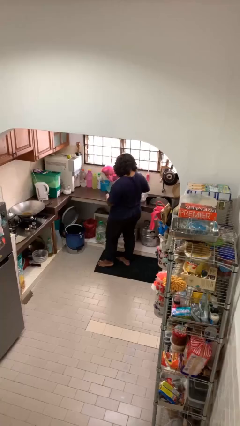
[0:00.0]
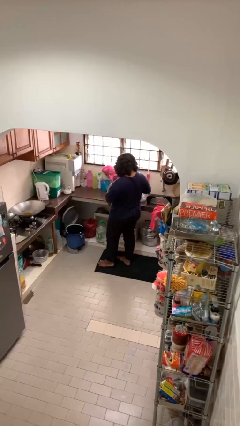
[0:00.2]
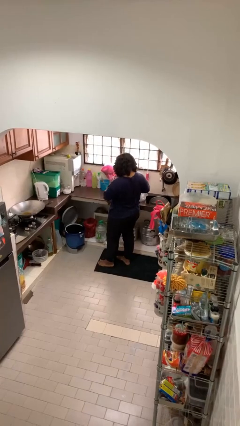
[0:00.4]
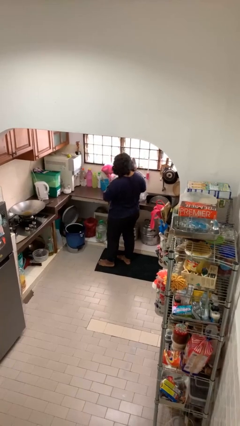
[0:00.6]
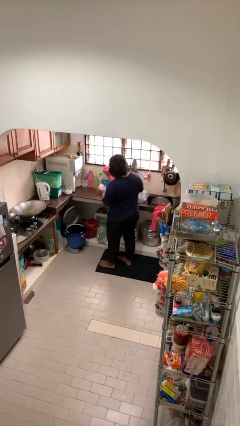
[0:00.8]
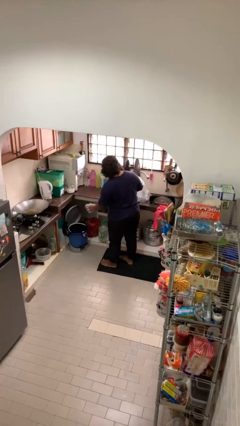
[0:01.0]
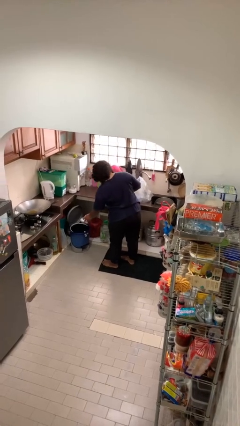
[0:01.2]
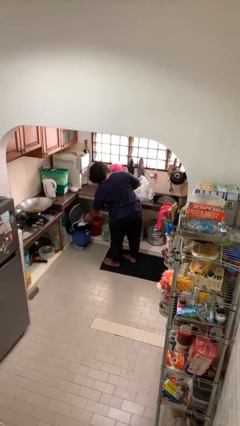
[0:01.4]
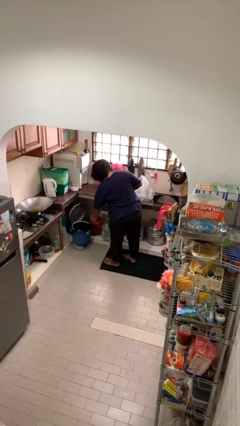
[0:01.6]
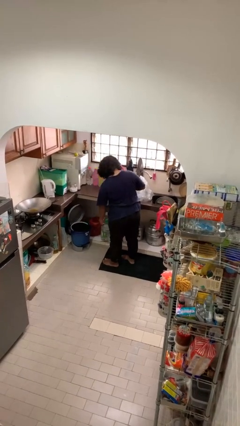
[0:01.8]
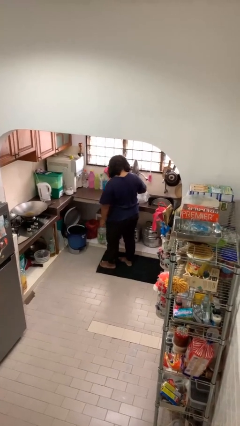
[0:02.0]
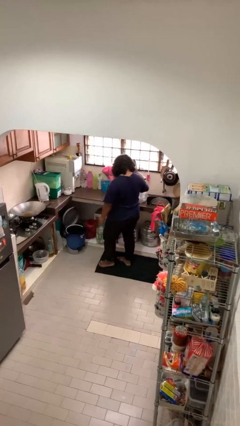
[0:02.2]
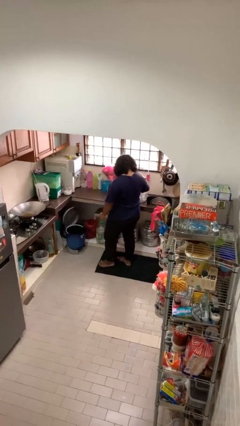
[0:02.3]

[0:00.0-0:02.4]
person discards trash

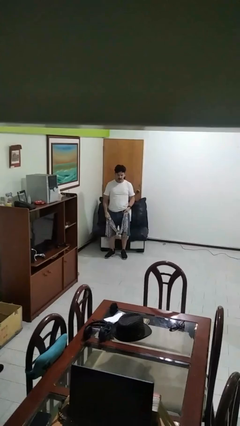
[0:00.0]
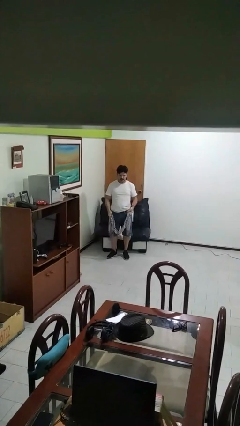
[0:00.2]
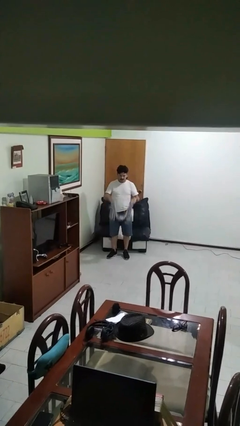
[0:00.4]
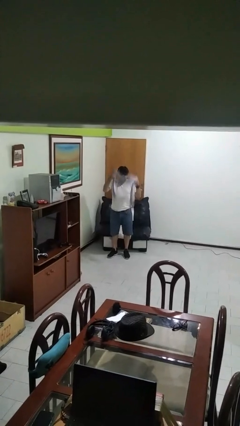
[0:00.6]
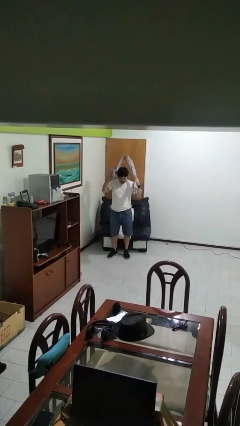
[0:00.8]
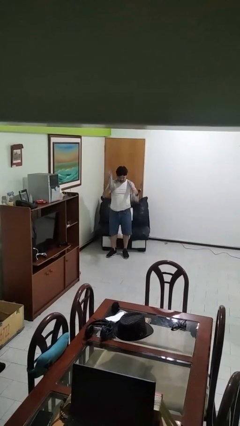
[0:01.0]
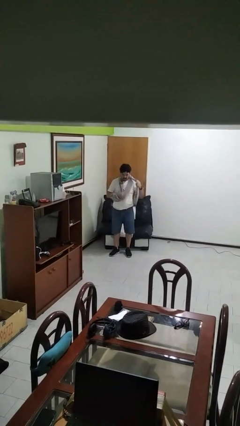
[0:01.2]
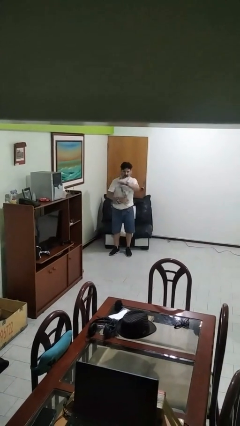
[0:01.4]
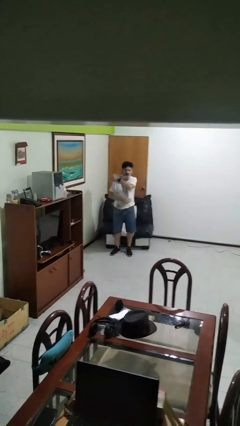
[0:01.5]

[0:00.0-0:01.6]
person puts on scarf

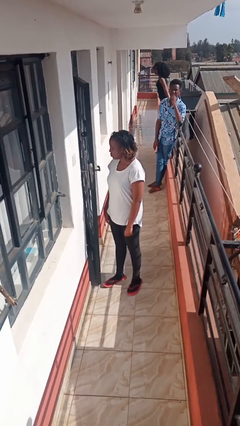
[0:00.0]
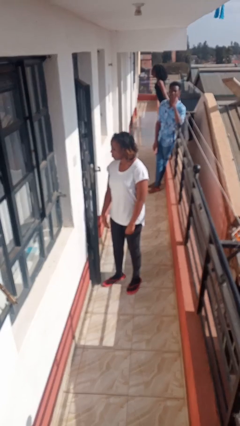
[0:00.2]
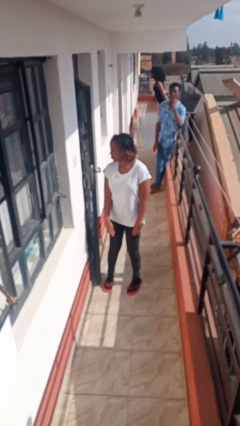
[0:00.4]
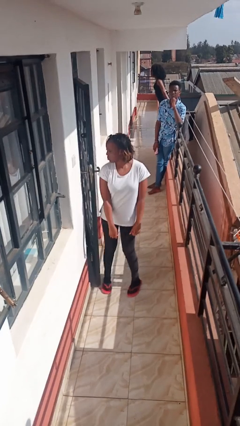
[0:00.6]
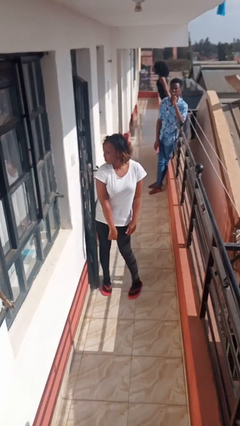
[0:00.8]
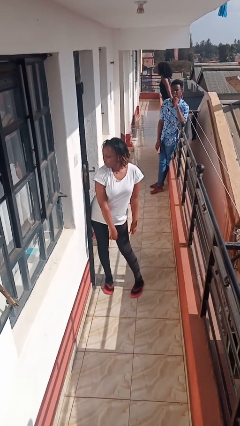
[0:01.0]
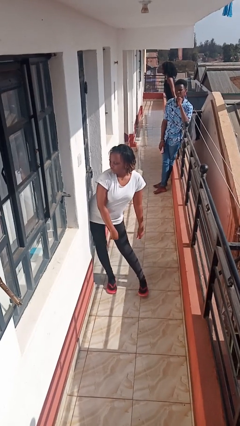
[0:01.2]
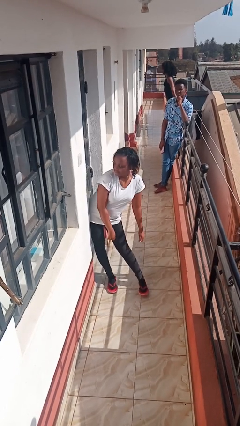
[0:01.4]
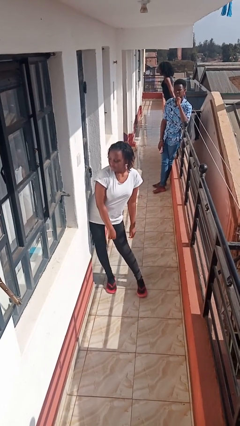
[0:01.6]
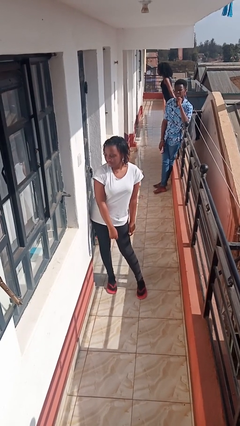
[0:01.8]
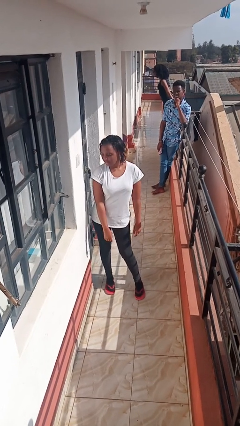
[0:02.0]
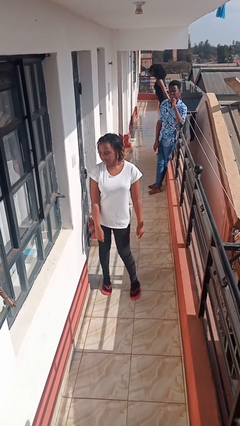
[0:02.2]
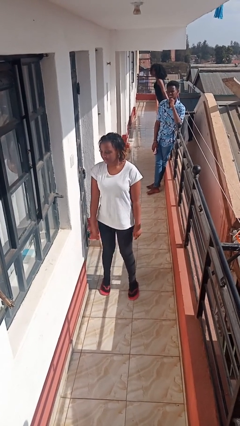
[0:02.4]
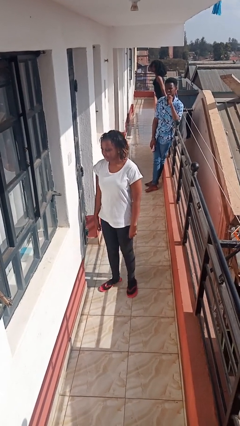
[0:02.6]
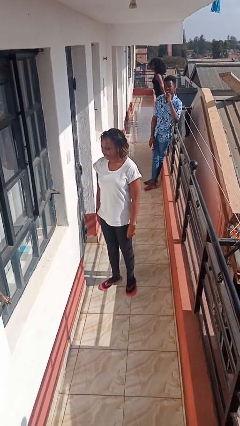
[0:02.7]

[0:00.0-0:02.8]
person closes door with hip

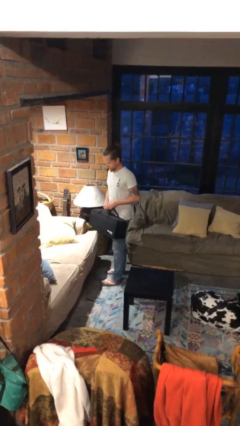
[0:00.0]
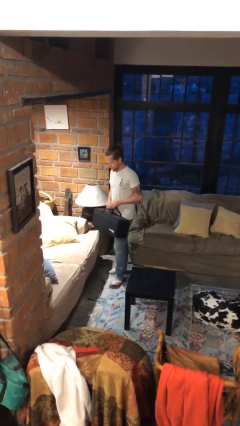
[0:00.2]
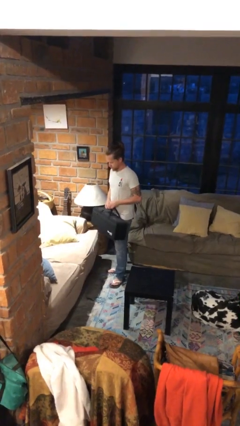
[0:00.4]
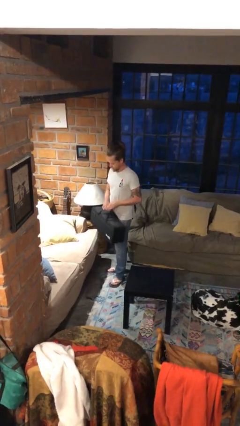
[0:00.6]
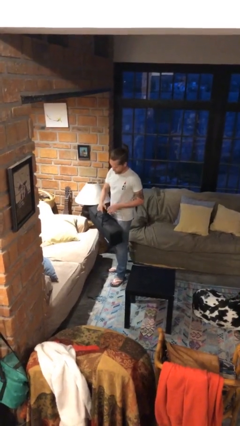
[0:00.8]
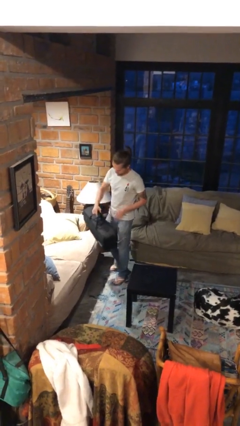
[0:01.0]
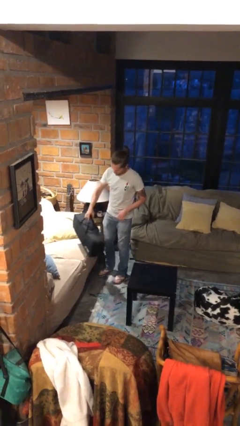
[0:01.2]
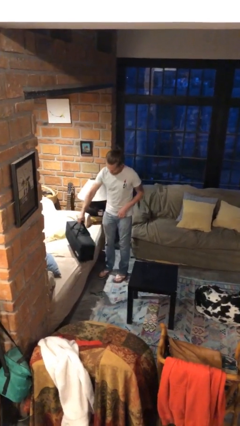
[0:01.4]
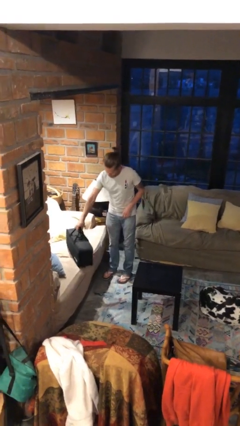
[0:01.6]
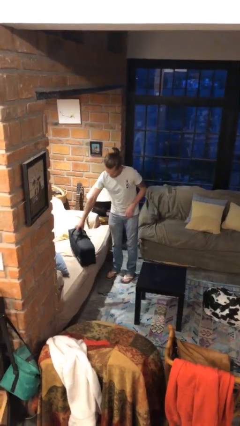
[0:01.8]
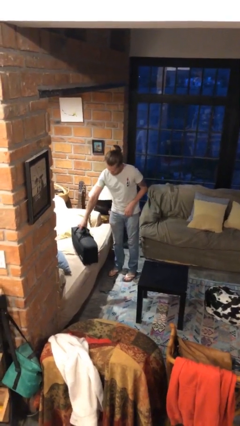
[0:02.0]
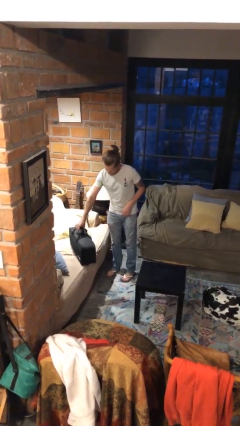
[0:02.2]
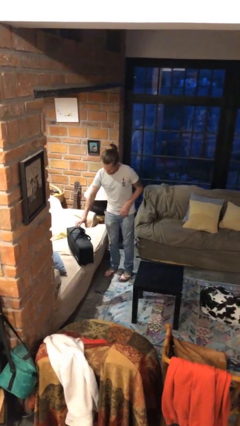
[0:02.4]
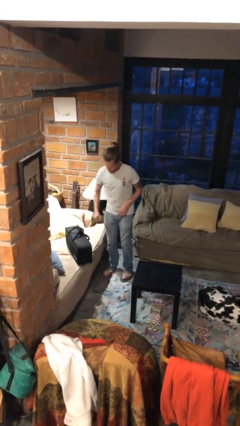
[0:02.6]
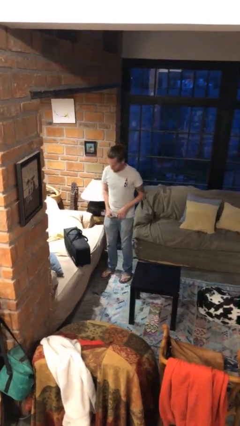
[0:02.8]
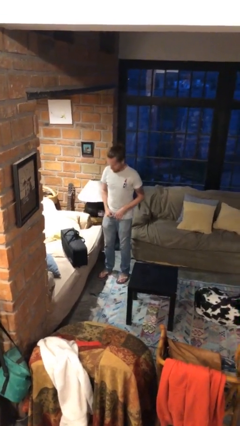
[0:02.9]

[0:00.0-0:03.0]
person puts down object on couch

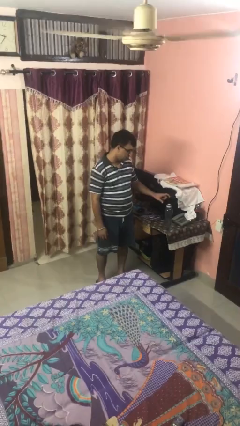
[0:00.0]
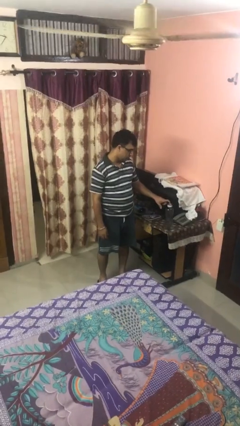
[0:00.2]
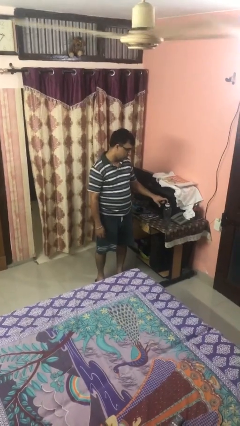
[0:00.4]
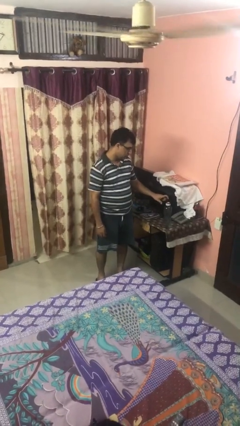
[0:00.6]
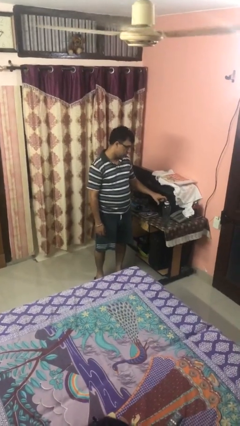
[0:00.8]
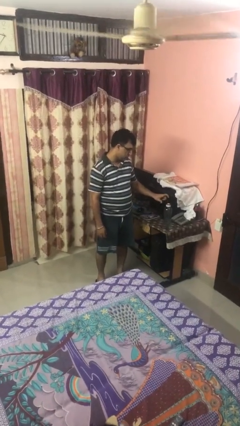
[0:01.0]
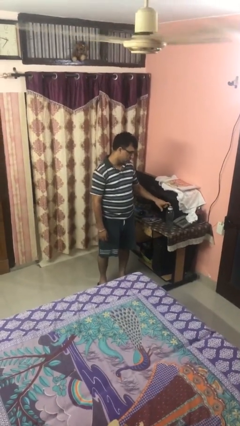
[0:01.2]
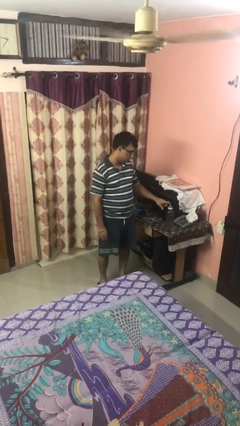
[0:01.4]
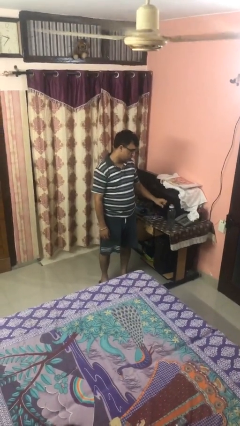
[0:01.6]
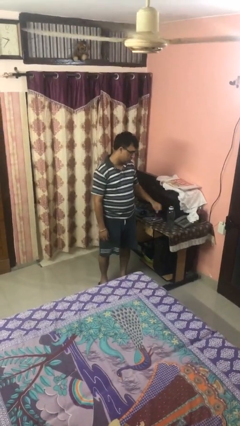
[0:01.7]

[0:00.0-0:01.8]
person taps object with finger

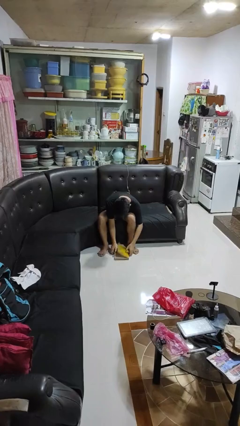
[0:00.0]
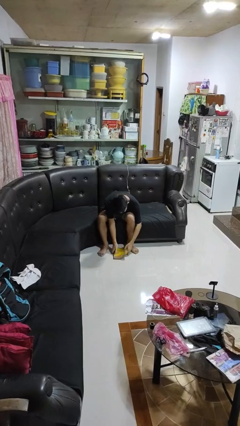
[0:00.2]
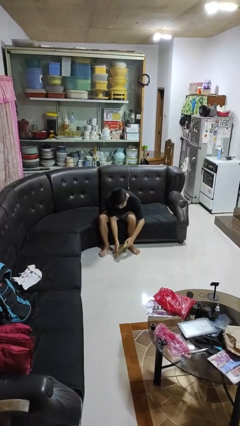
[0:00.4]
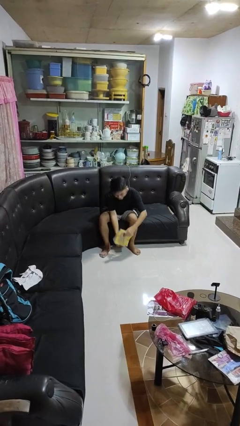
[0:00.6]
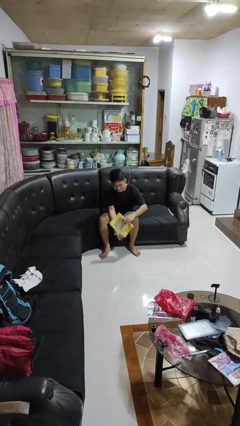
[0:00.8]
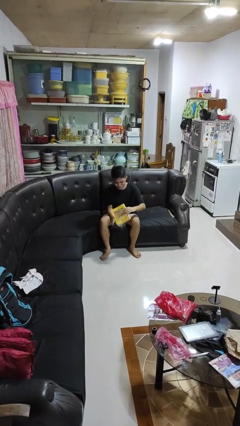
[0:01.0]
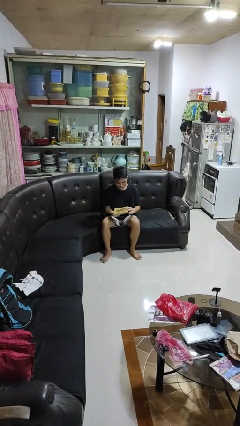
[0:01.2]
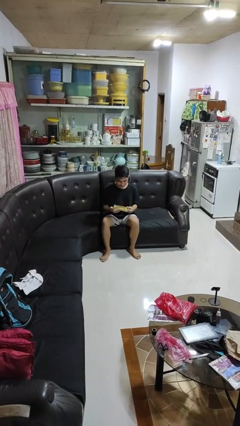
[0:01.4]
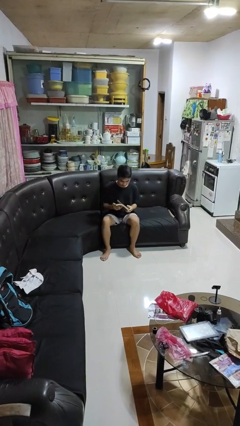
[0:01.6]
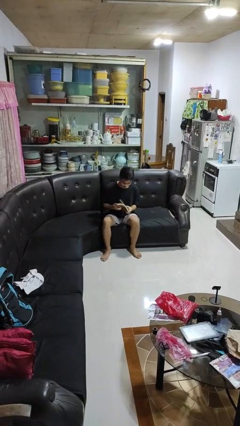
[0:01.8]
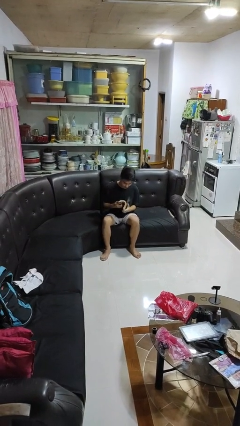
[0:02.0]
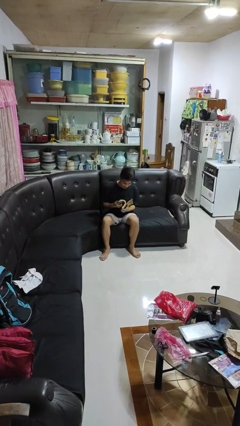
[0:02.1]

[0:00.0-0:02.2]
person picks up object from floor

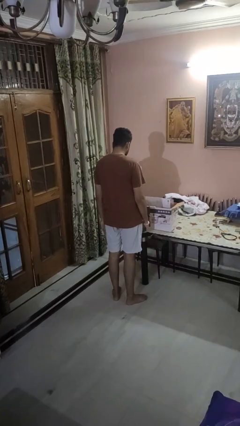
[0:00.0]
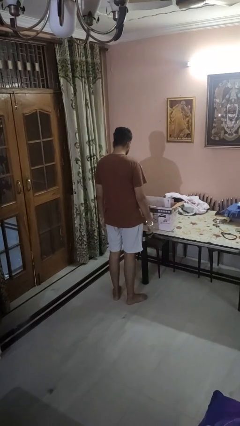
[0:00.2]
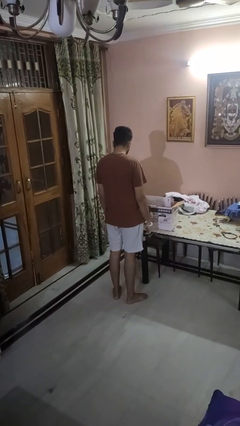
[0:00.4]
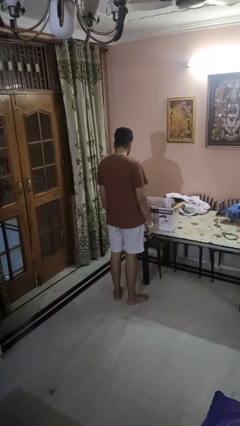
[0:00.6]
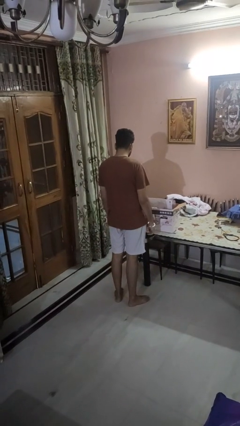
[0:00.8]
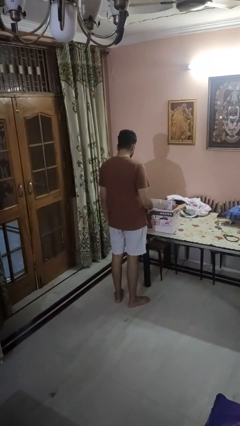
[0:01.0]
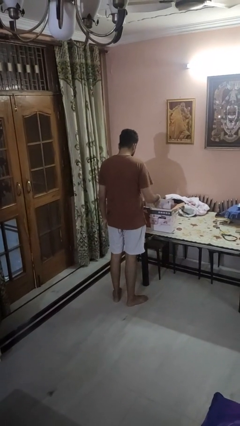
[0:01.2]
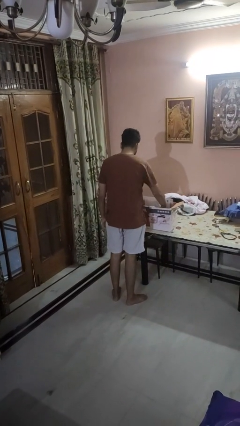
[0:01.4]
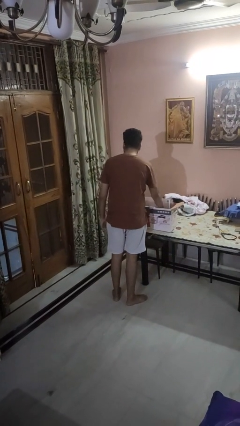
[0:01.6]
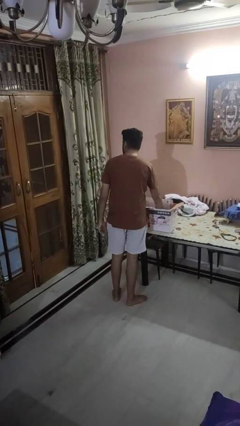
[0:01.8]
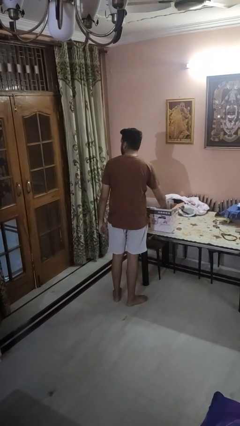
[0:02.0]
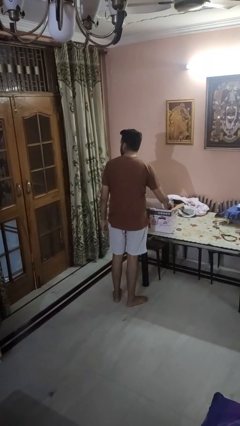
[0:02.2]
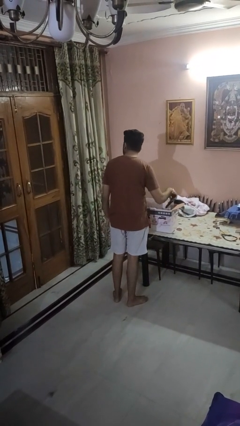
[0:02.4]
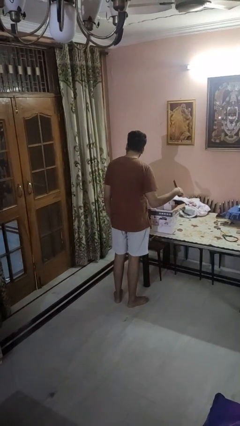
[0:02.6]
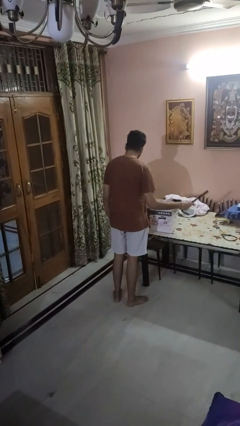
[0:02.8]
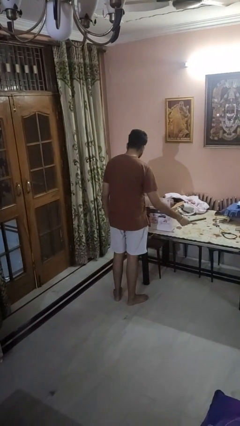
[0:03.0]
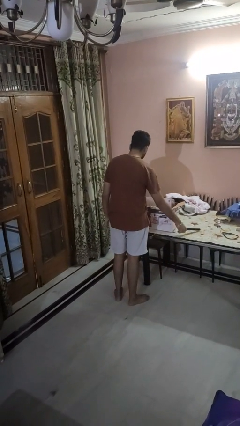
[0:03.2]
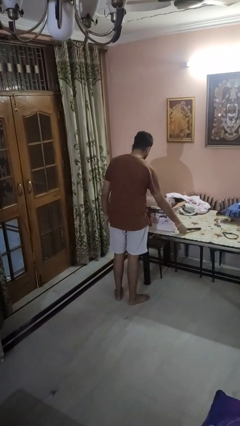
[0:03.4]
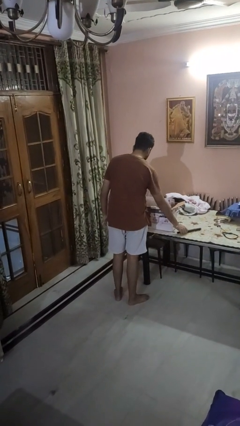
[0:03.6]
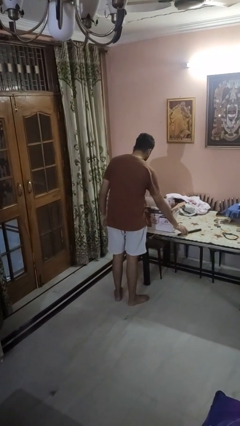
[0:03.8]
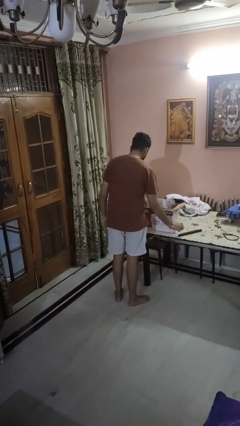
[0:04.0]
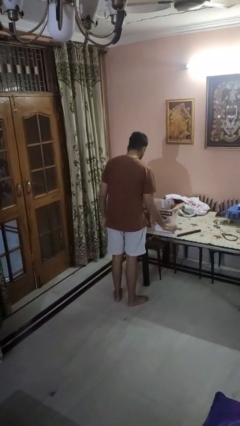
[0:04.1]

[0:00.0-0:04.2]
person takes object from box
